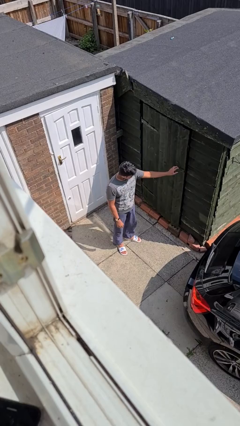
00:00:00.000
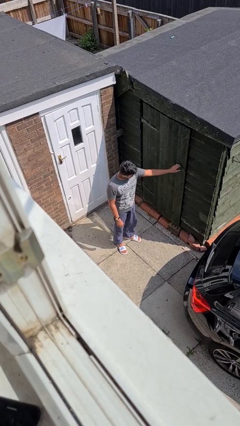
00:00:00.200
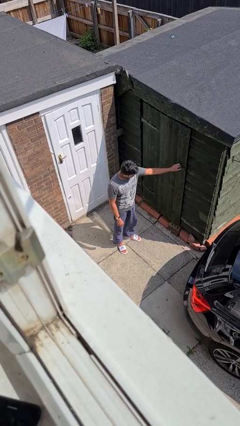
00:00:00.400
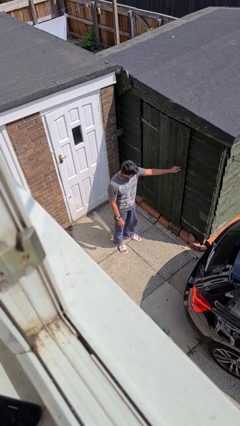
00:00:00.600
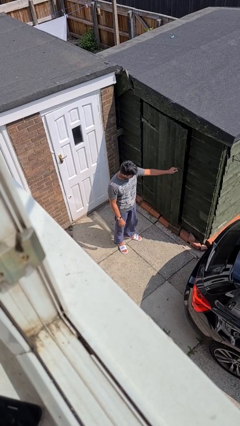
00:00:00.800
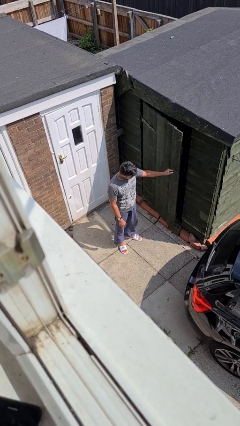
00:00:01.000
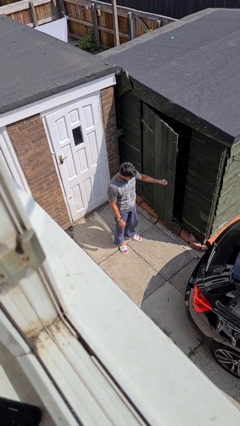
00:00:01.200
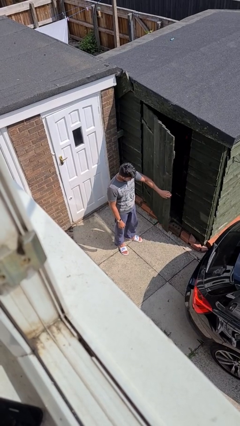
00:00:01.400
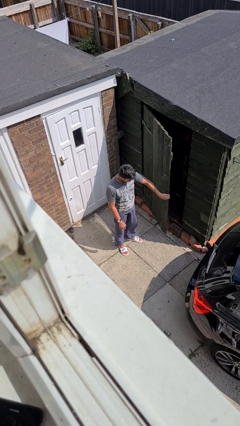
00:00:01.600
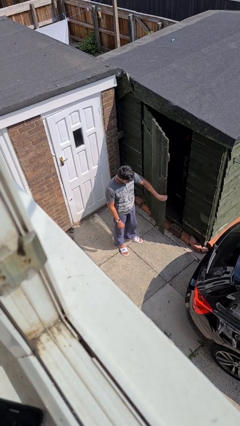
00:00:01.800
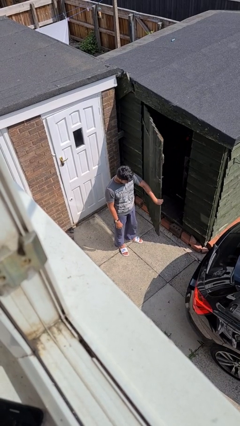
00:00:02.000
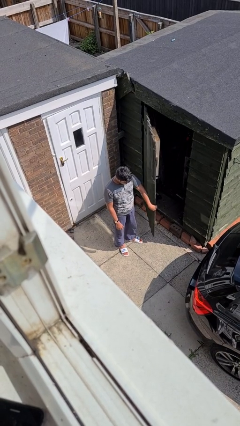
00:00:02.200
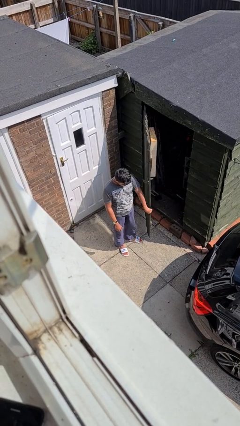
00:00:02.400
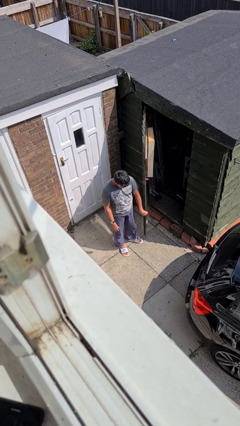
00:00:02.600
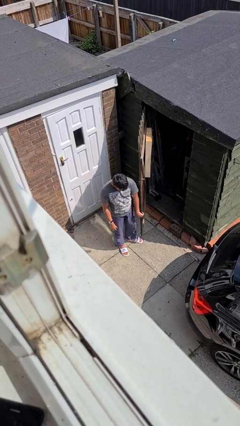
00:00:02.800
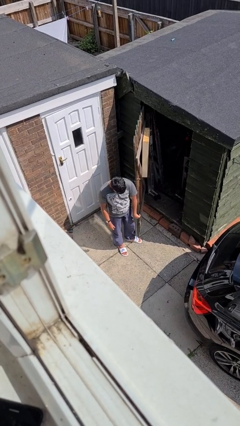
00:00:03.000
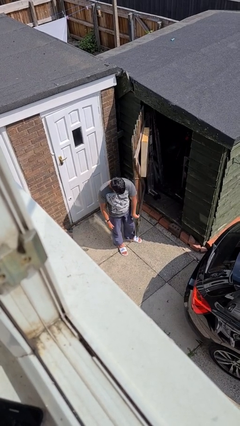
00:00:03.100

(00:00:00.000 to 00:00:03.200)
person opens facility door

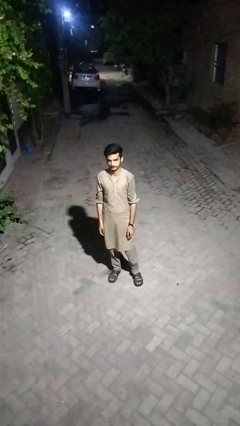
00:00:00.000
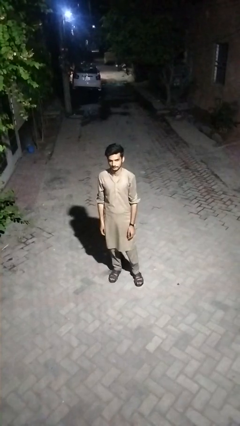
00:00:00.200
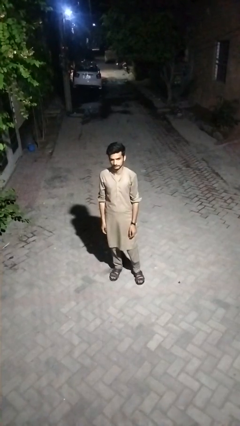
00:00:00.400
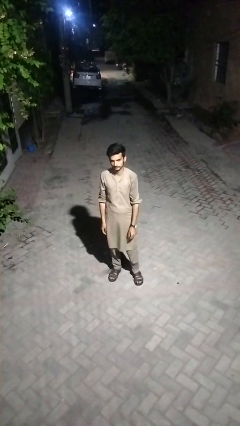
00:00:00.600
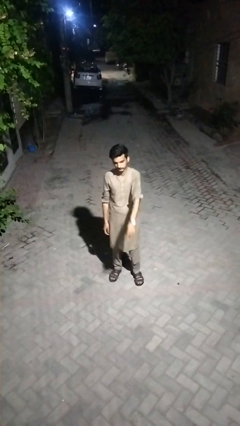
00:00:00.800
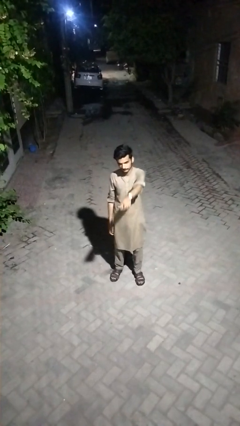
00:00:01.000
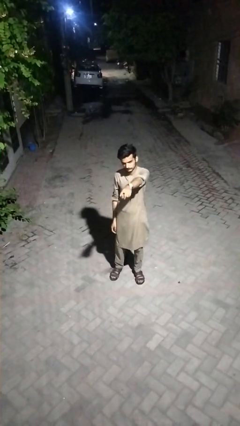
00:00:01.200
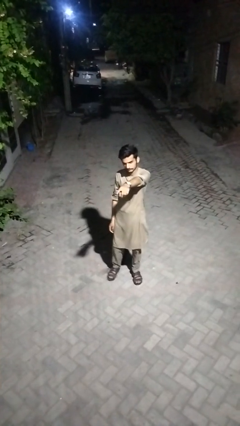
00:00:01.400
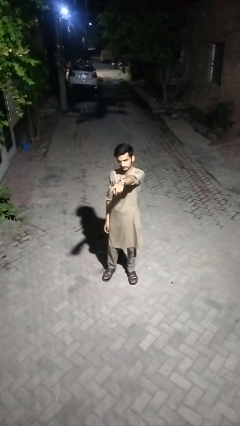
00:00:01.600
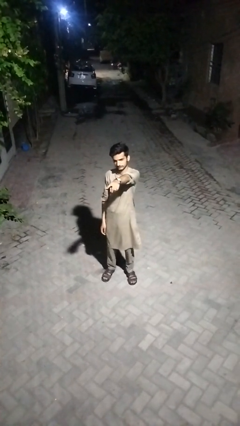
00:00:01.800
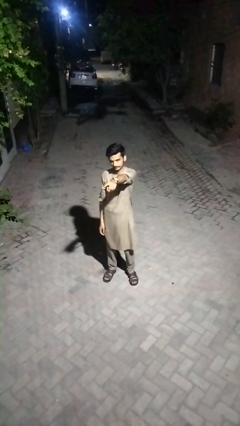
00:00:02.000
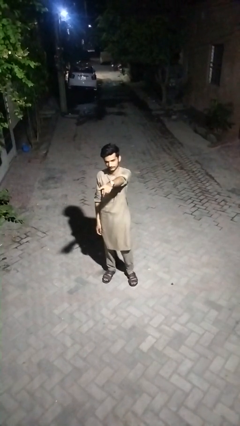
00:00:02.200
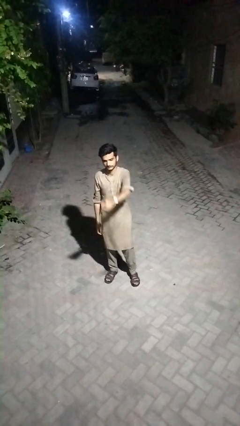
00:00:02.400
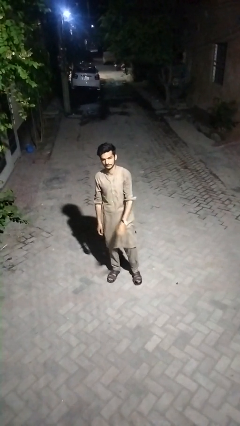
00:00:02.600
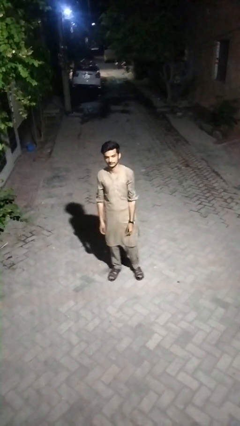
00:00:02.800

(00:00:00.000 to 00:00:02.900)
person points at person

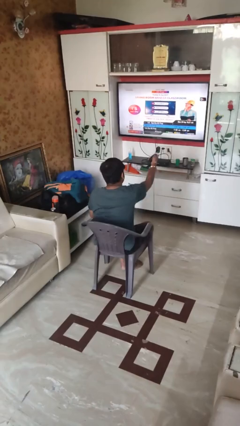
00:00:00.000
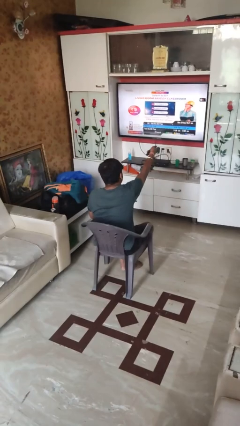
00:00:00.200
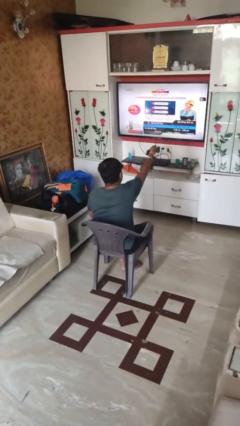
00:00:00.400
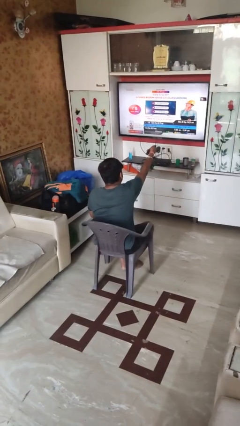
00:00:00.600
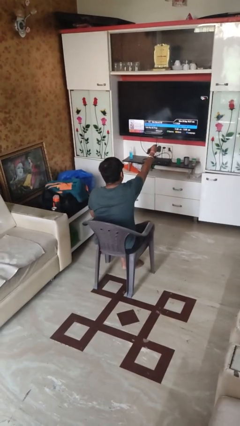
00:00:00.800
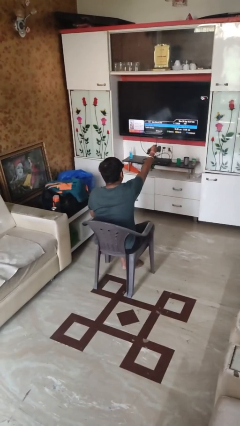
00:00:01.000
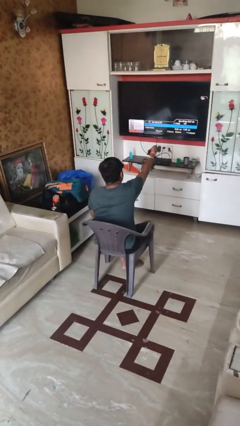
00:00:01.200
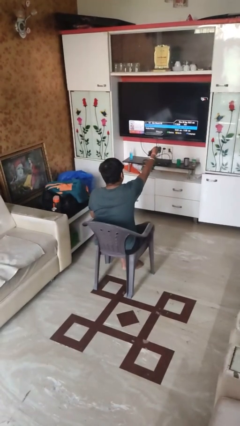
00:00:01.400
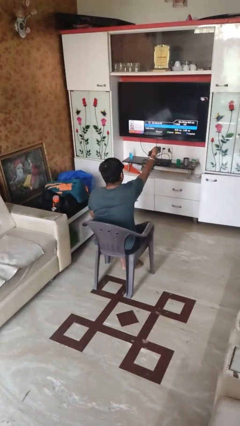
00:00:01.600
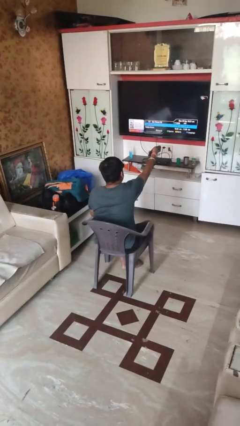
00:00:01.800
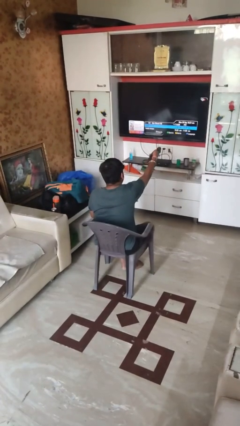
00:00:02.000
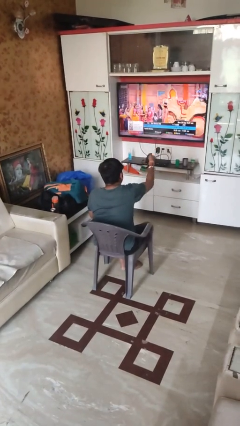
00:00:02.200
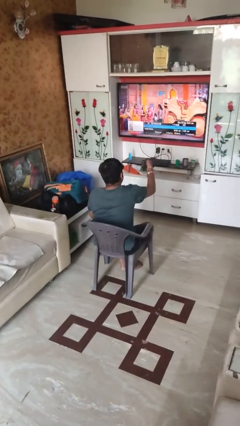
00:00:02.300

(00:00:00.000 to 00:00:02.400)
person uses television remote

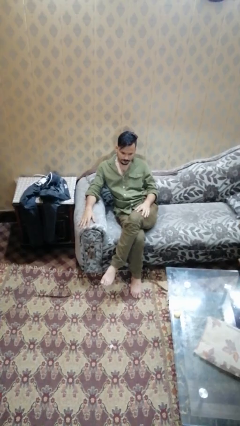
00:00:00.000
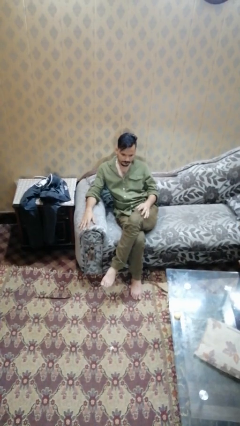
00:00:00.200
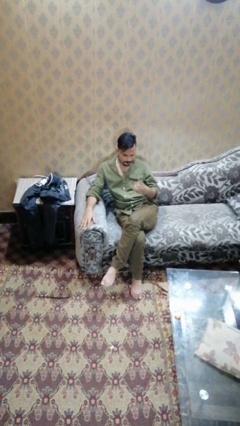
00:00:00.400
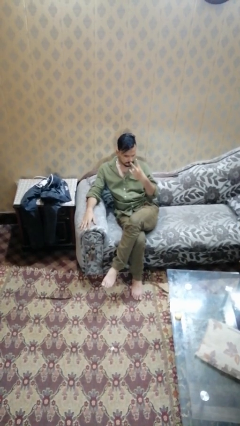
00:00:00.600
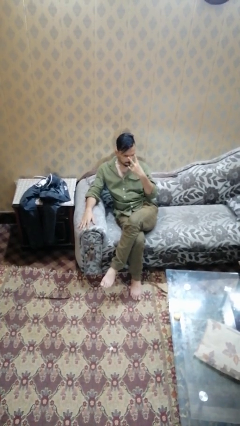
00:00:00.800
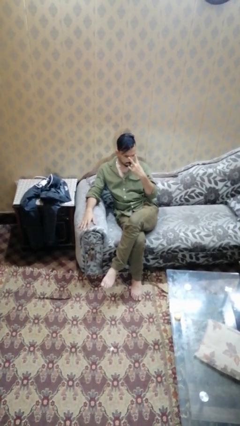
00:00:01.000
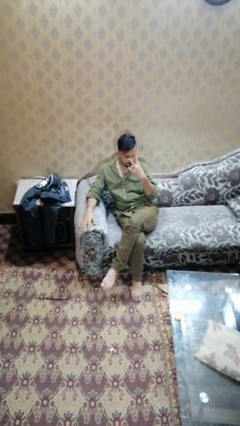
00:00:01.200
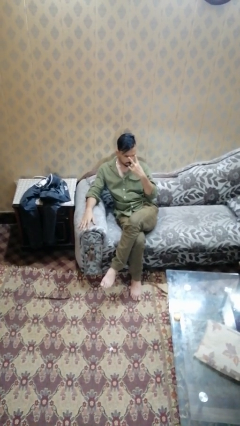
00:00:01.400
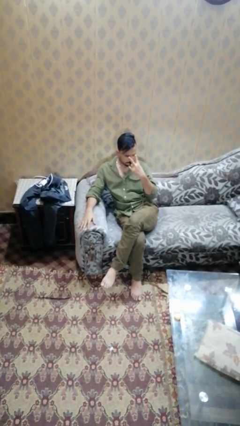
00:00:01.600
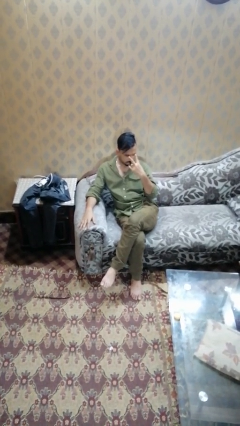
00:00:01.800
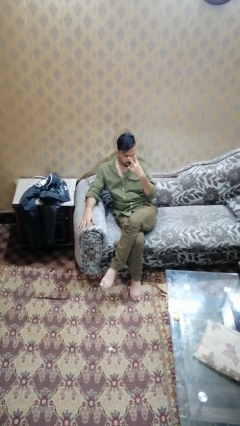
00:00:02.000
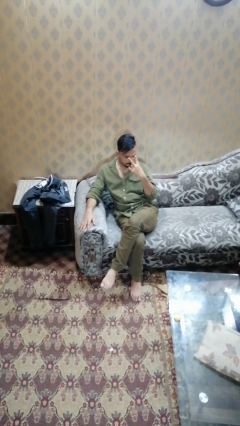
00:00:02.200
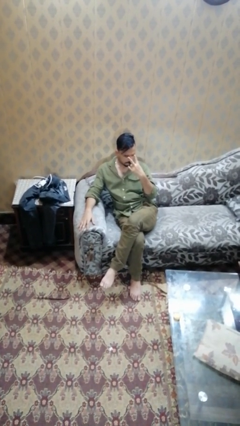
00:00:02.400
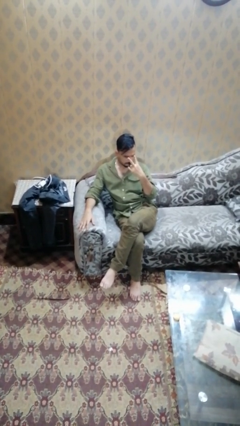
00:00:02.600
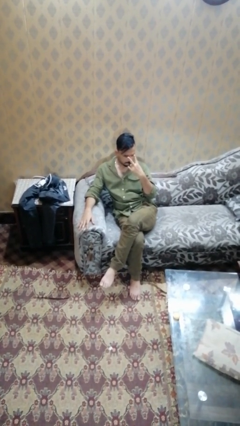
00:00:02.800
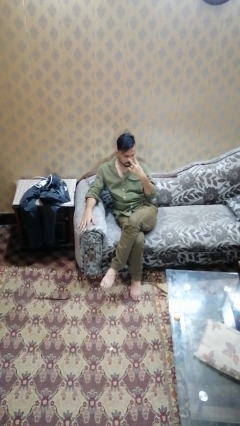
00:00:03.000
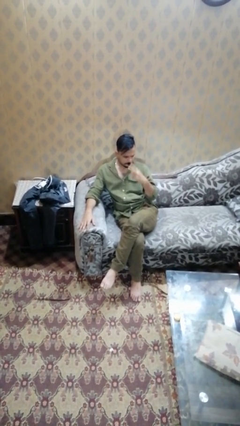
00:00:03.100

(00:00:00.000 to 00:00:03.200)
person gestures watch closely

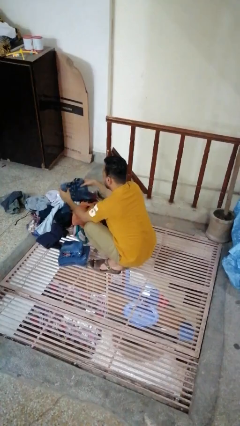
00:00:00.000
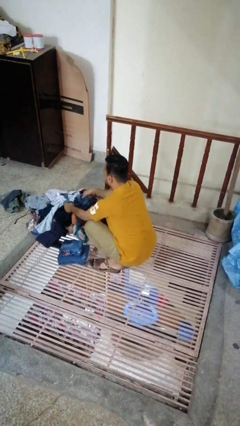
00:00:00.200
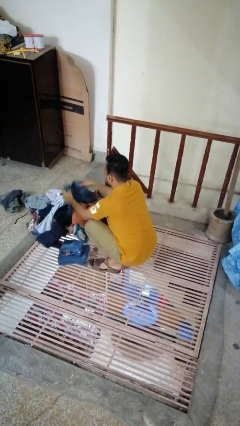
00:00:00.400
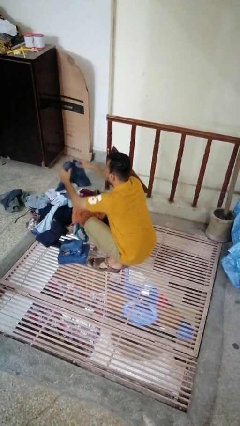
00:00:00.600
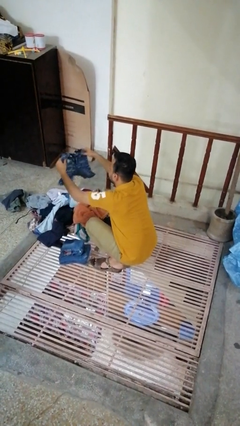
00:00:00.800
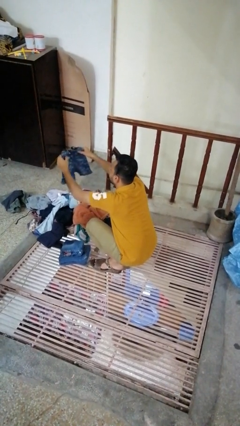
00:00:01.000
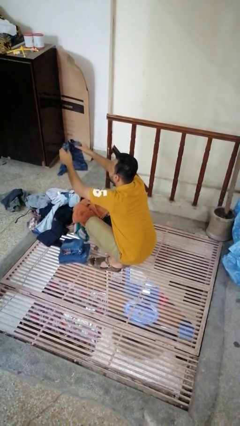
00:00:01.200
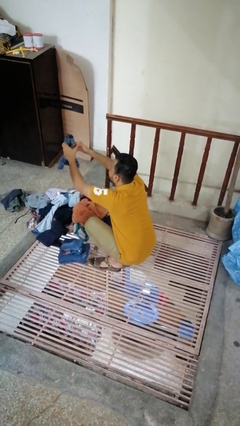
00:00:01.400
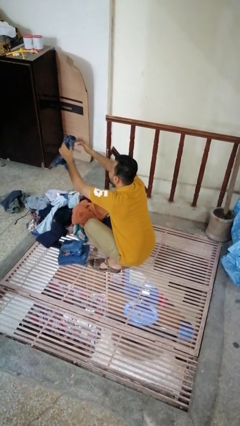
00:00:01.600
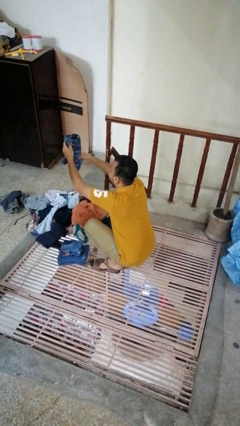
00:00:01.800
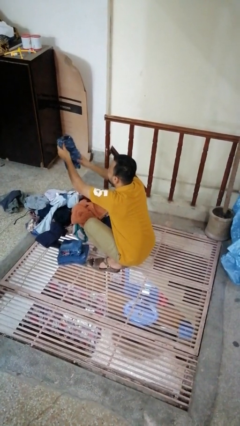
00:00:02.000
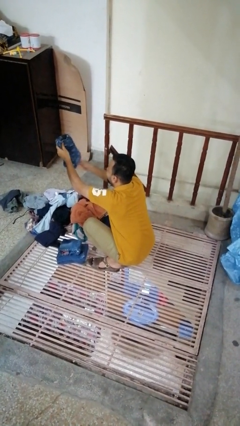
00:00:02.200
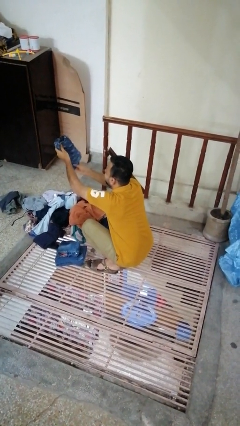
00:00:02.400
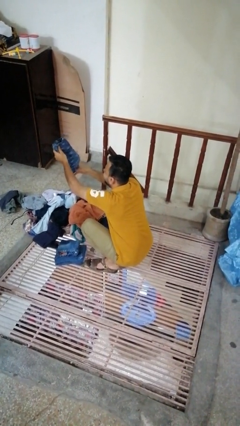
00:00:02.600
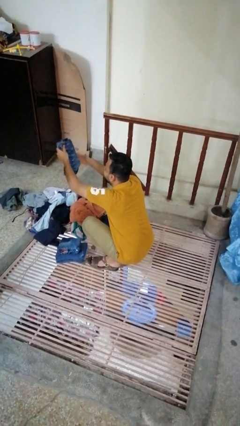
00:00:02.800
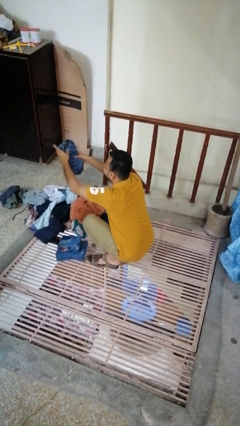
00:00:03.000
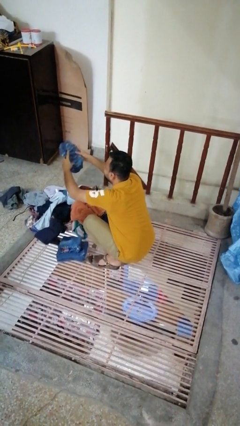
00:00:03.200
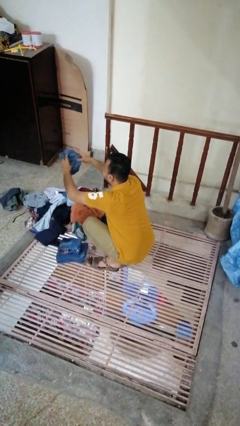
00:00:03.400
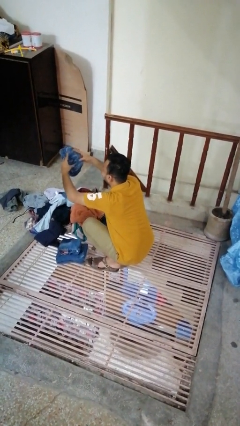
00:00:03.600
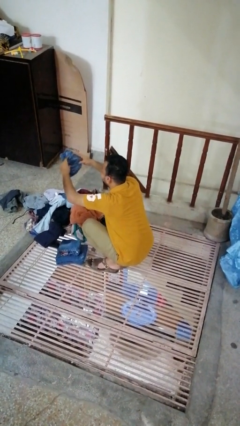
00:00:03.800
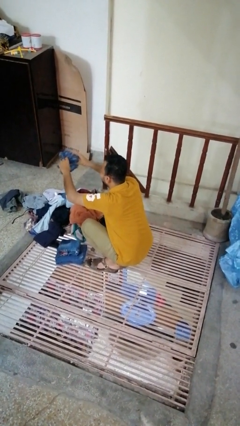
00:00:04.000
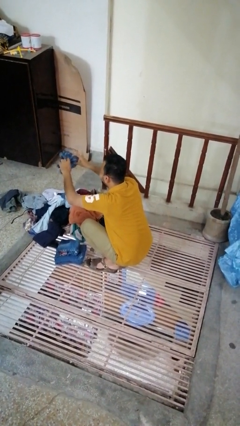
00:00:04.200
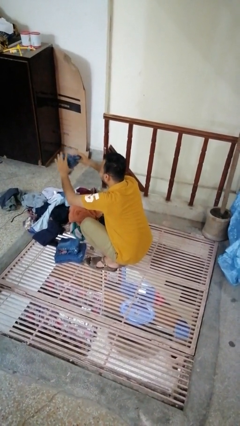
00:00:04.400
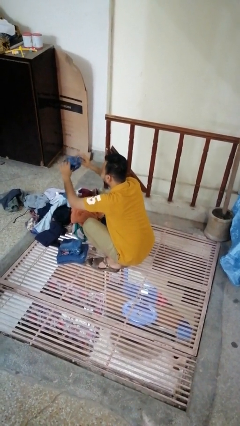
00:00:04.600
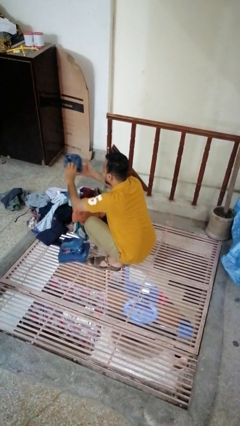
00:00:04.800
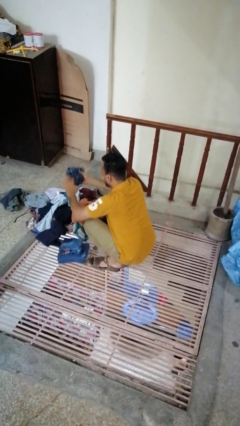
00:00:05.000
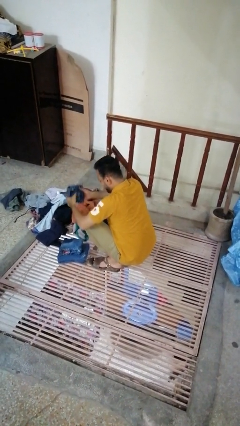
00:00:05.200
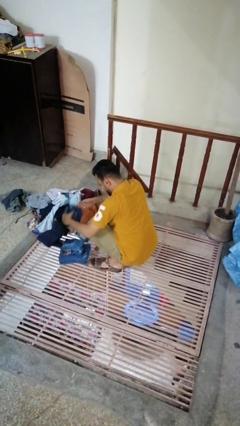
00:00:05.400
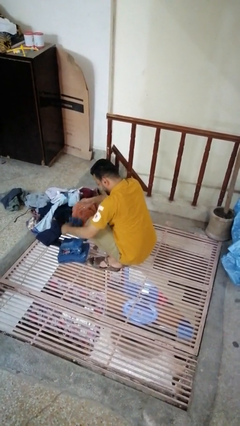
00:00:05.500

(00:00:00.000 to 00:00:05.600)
person folds pants

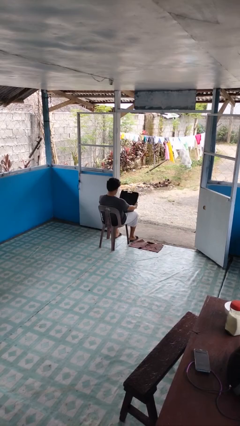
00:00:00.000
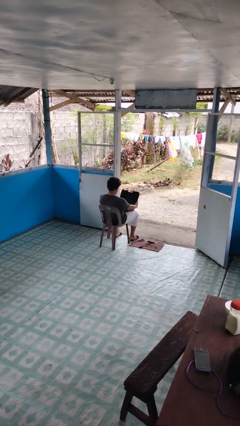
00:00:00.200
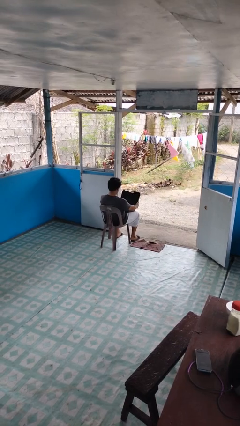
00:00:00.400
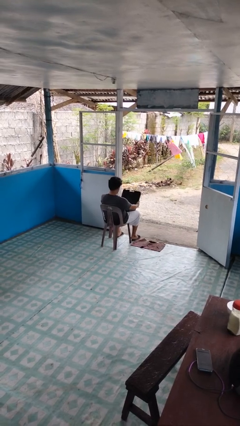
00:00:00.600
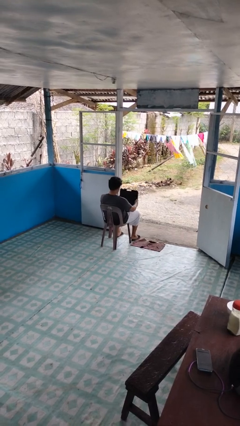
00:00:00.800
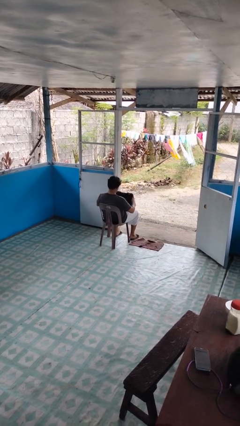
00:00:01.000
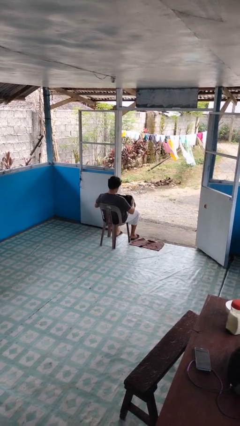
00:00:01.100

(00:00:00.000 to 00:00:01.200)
person closes suitcase
